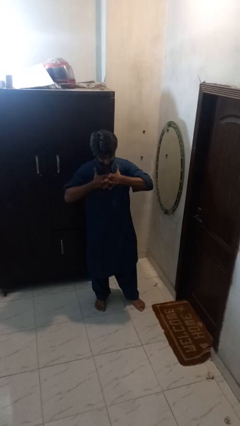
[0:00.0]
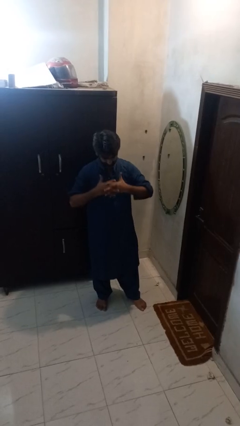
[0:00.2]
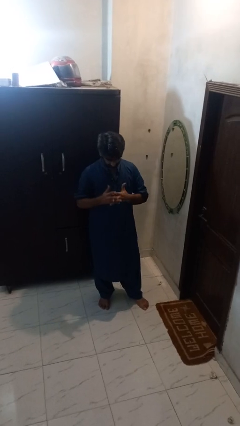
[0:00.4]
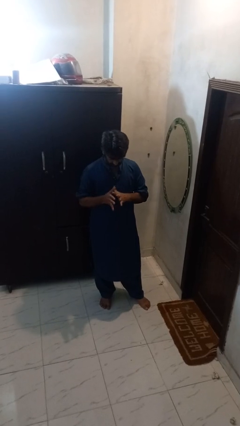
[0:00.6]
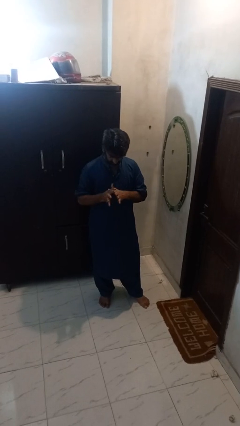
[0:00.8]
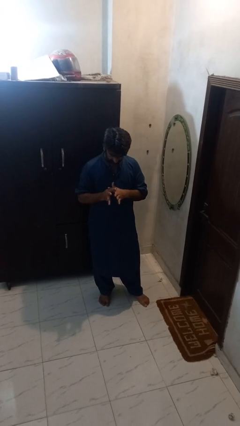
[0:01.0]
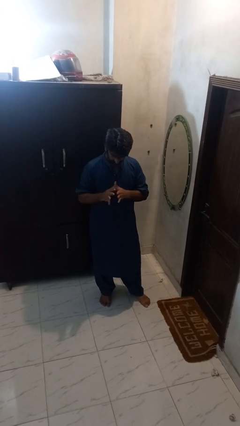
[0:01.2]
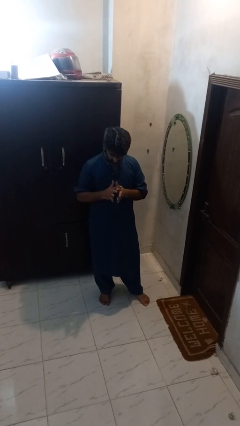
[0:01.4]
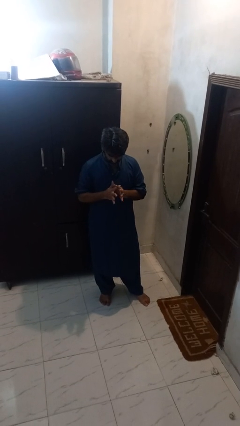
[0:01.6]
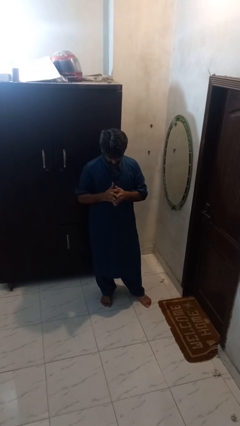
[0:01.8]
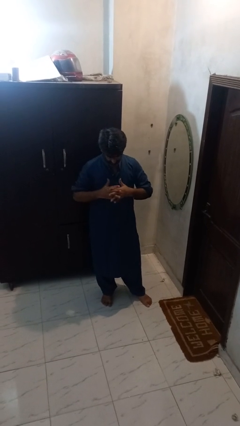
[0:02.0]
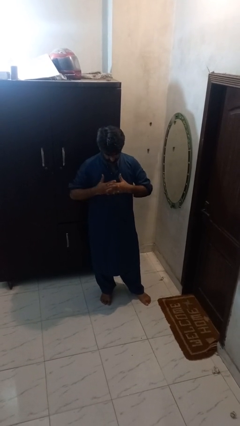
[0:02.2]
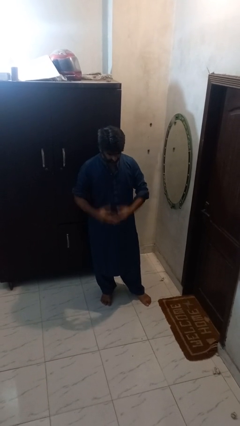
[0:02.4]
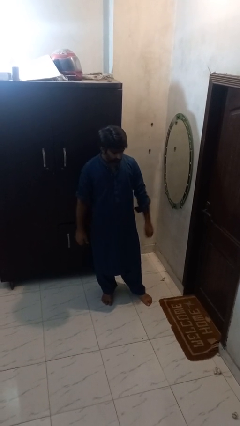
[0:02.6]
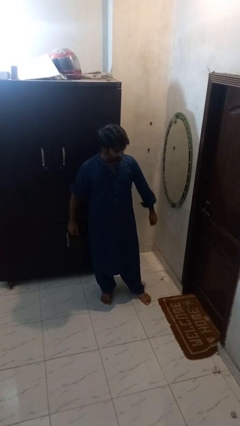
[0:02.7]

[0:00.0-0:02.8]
person cracks knuckles

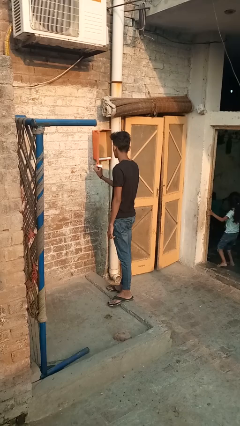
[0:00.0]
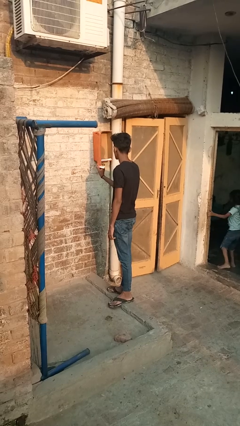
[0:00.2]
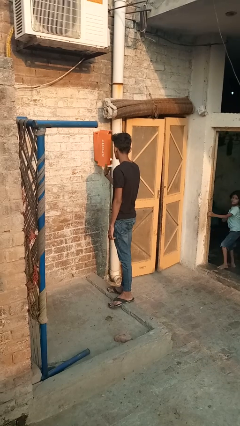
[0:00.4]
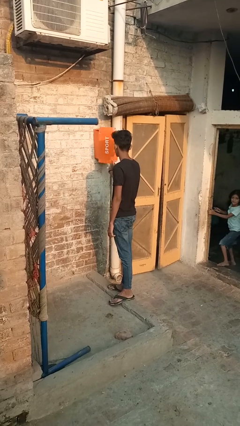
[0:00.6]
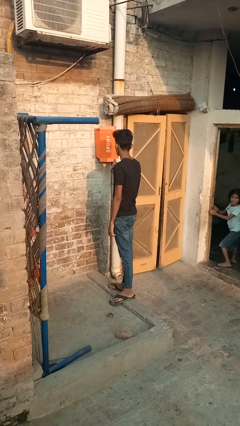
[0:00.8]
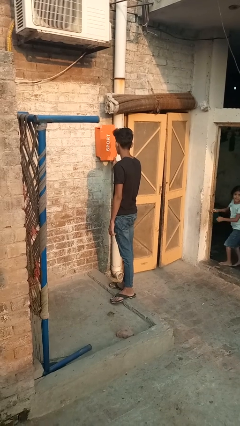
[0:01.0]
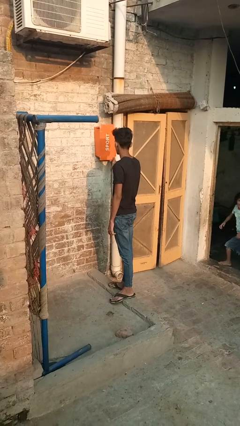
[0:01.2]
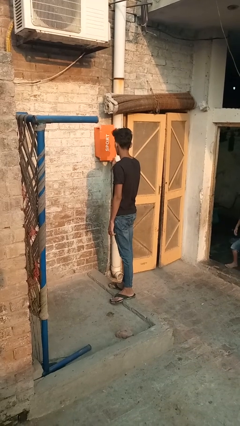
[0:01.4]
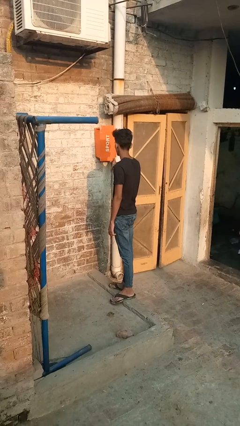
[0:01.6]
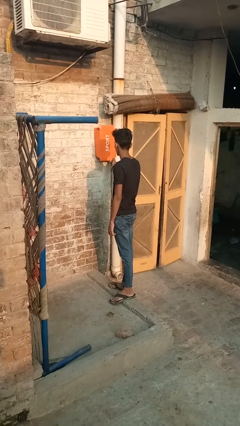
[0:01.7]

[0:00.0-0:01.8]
person opens mailbox

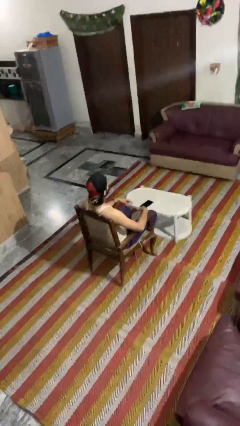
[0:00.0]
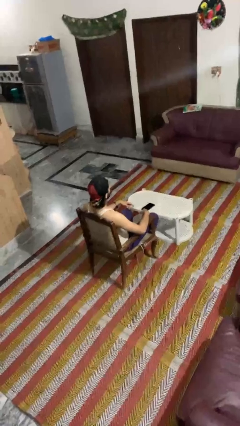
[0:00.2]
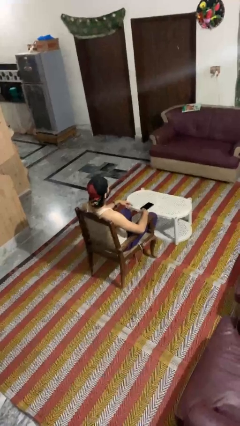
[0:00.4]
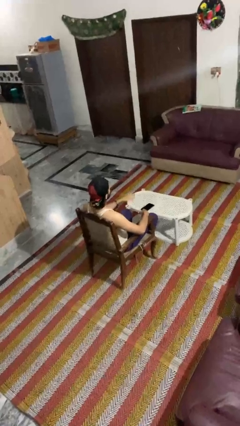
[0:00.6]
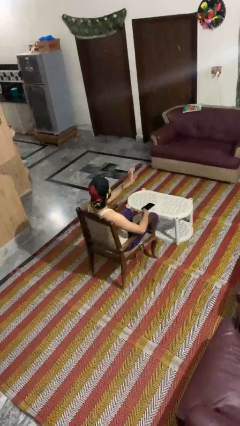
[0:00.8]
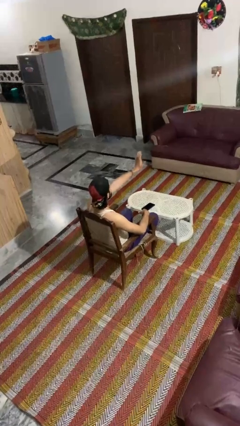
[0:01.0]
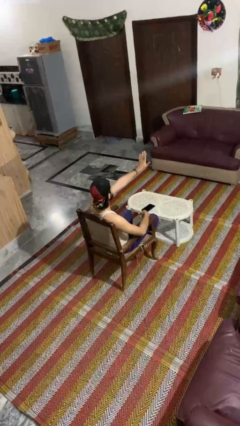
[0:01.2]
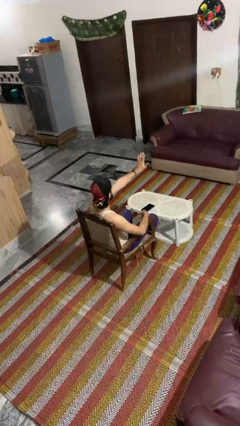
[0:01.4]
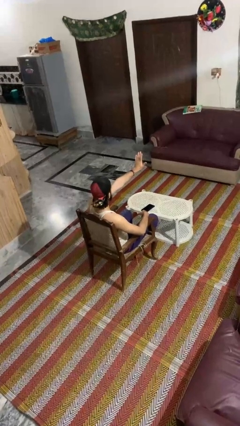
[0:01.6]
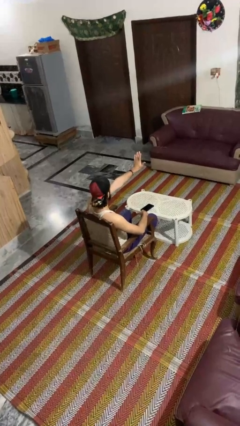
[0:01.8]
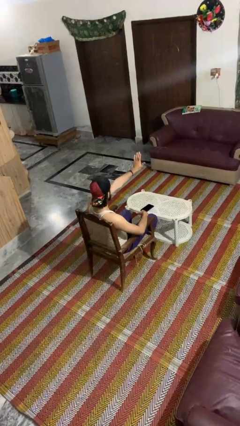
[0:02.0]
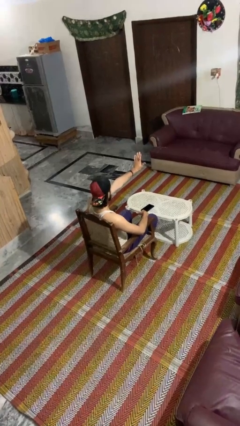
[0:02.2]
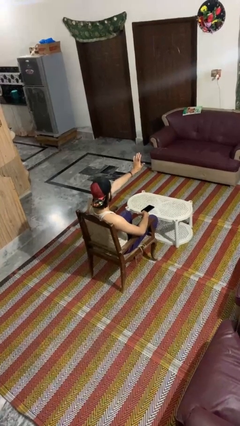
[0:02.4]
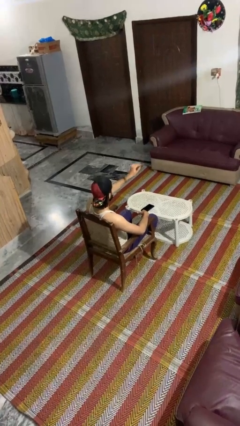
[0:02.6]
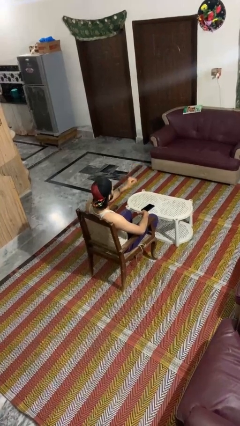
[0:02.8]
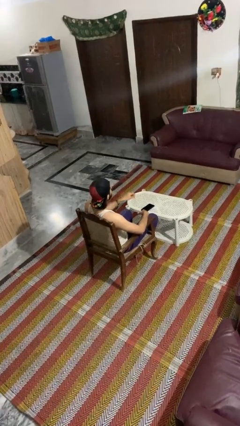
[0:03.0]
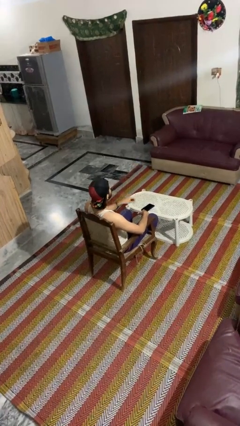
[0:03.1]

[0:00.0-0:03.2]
person gestures stop

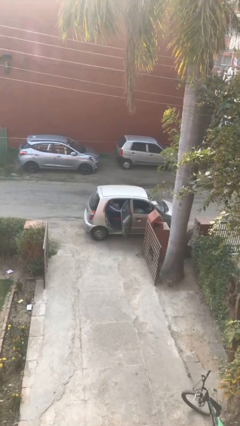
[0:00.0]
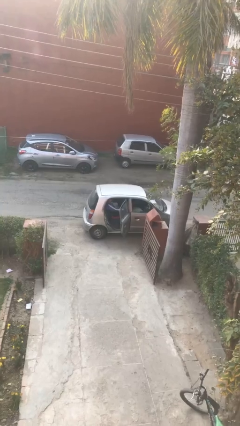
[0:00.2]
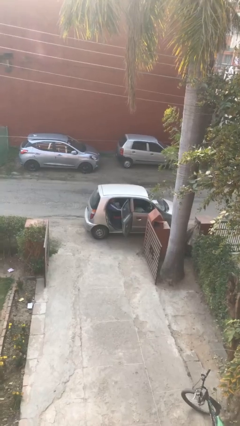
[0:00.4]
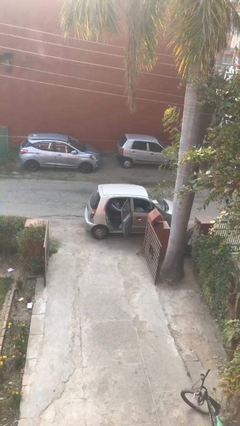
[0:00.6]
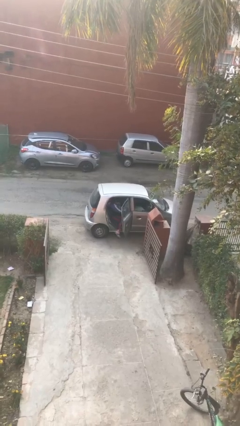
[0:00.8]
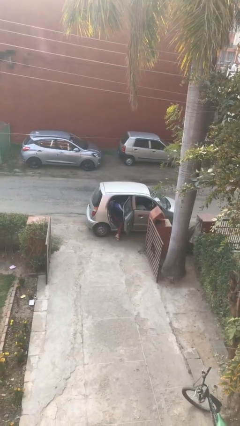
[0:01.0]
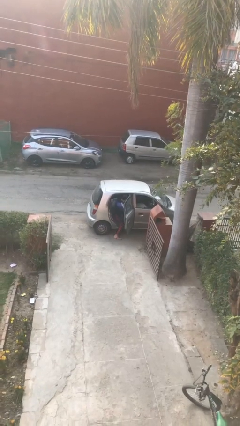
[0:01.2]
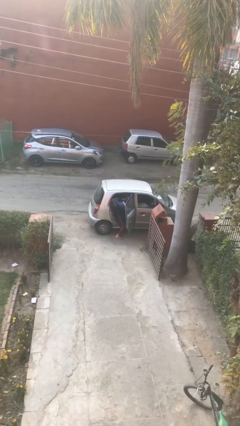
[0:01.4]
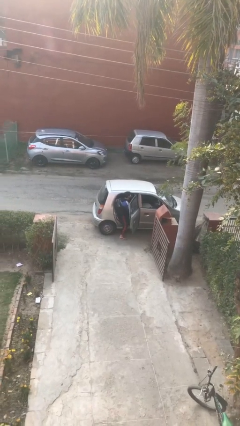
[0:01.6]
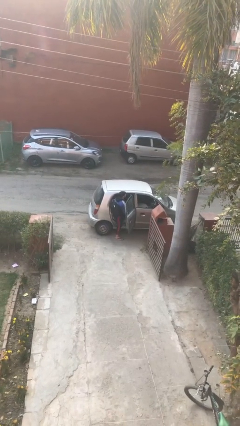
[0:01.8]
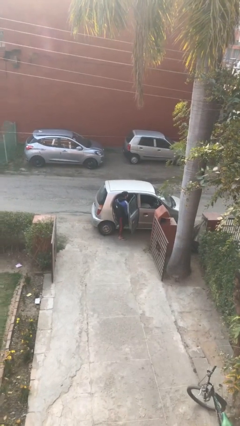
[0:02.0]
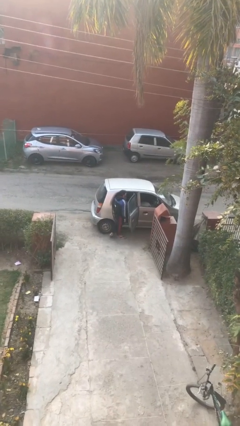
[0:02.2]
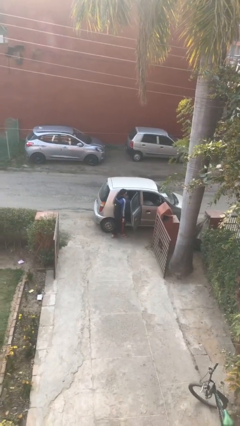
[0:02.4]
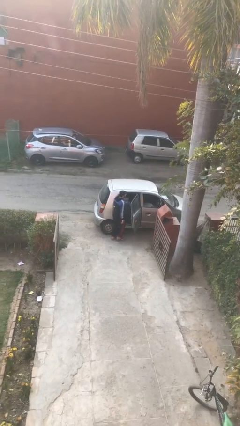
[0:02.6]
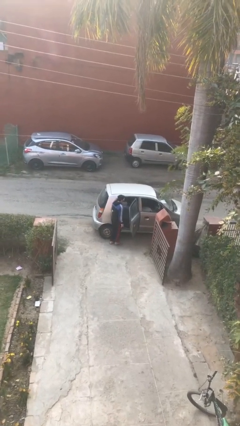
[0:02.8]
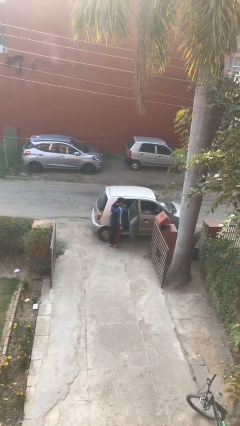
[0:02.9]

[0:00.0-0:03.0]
person exits car

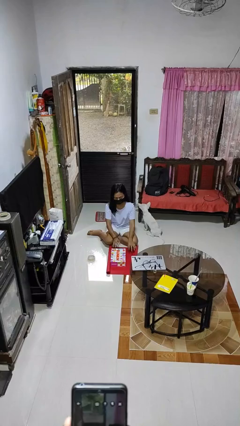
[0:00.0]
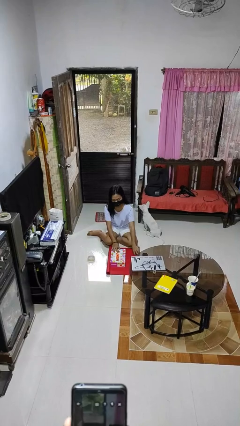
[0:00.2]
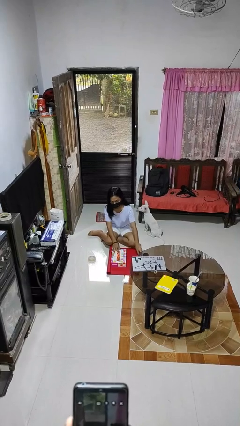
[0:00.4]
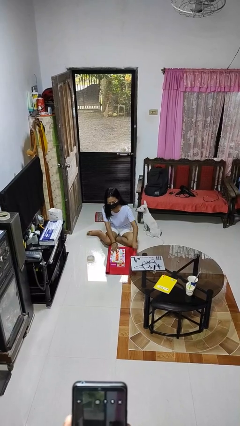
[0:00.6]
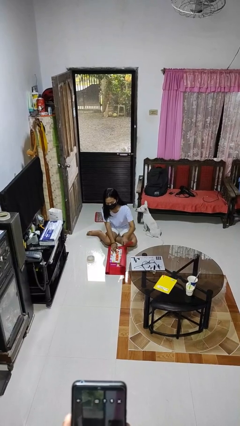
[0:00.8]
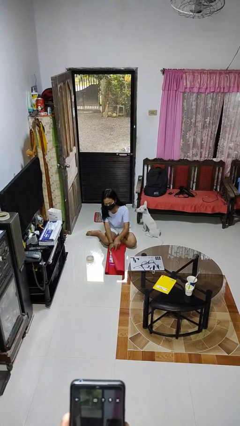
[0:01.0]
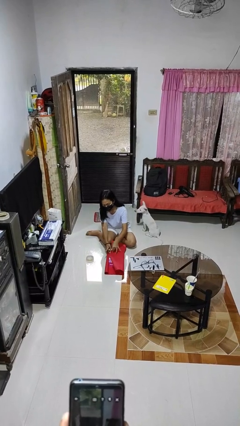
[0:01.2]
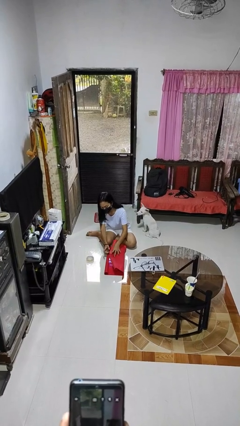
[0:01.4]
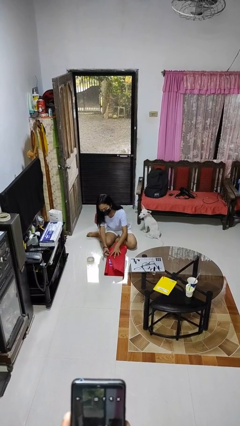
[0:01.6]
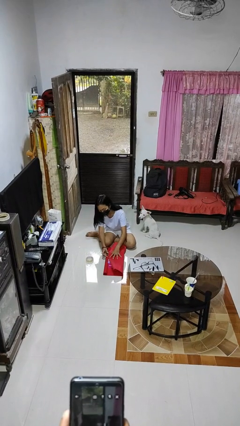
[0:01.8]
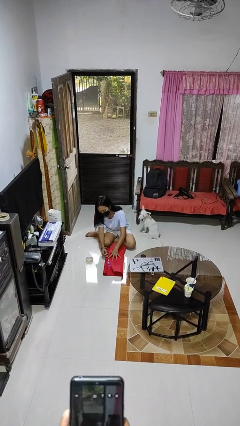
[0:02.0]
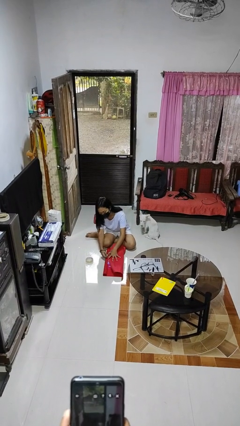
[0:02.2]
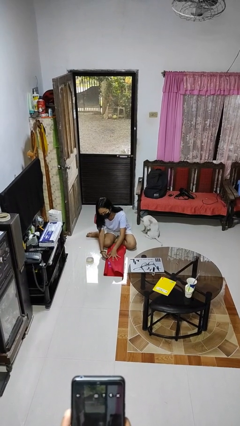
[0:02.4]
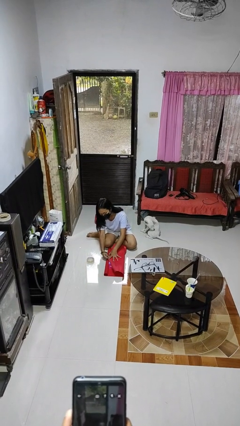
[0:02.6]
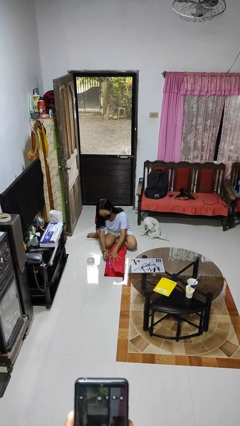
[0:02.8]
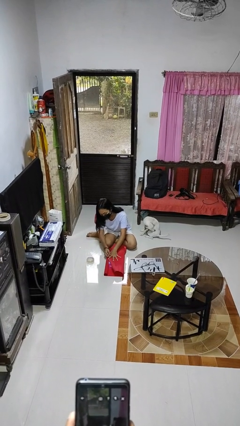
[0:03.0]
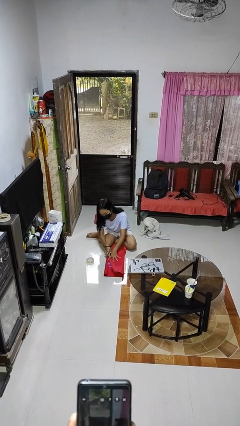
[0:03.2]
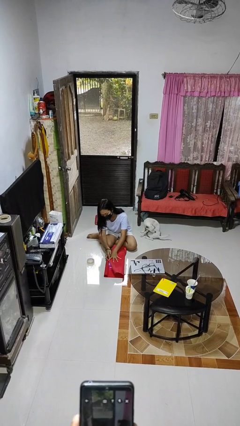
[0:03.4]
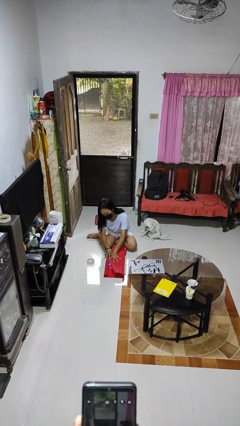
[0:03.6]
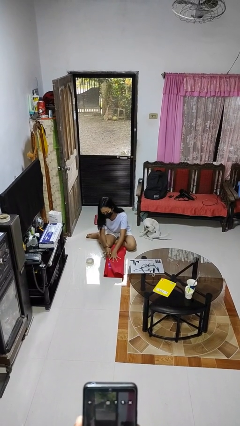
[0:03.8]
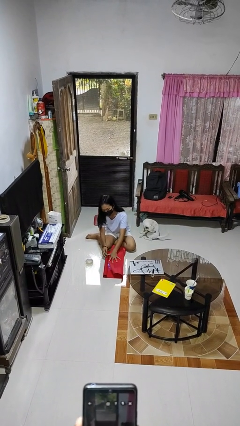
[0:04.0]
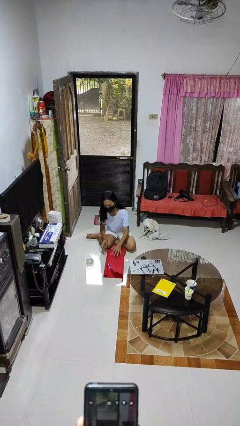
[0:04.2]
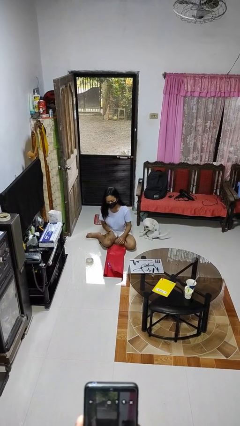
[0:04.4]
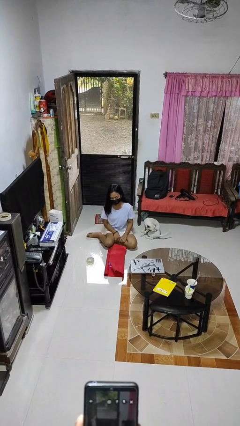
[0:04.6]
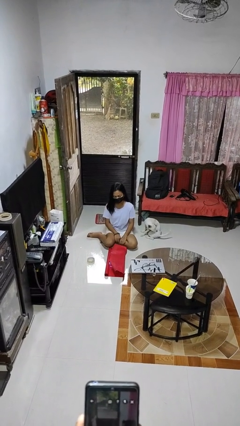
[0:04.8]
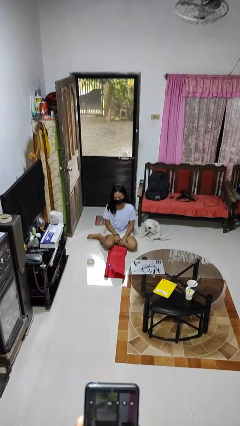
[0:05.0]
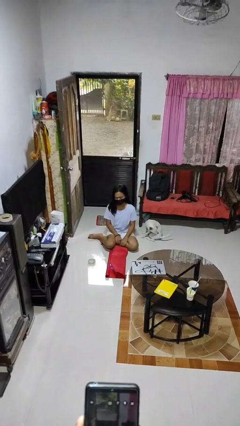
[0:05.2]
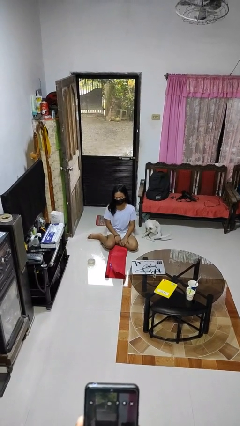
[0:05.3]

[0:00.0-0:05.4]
person wraps box

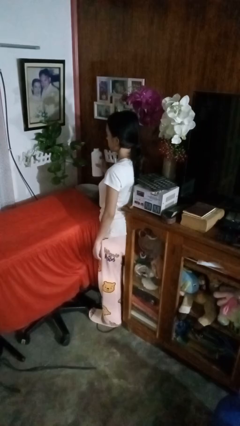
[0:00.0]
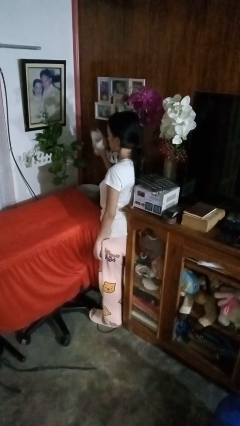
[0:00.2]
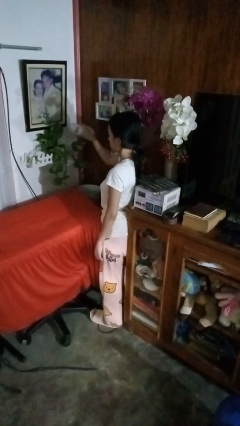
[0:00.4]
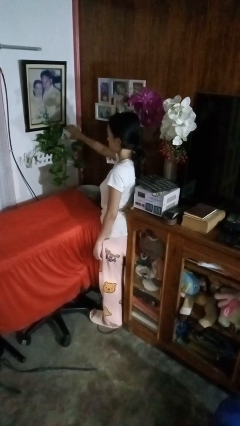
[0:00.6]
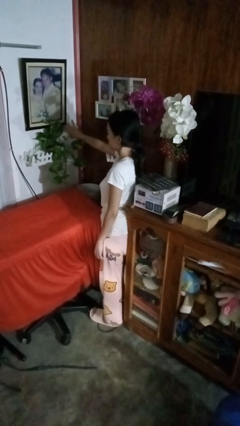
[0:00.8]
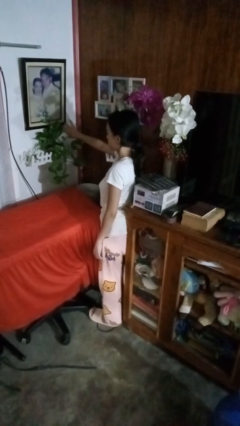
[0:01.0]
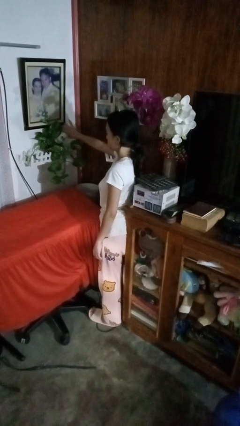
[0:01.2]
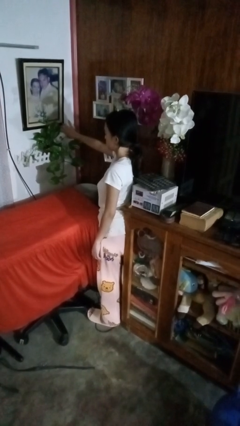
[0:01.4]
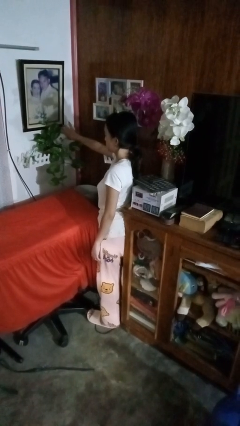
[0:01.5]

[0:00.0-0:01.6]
person waters houseplant
